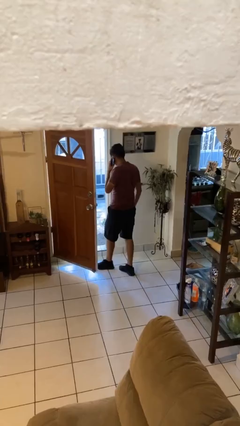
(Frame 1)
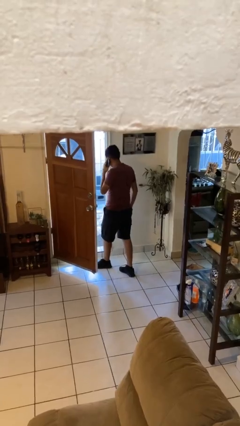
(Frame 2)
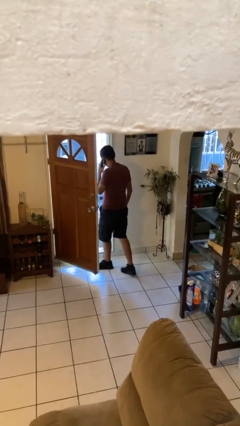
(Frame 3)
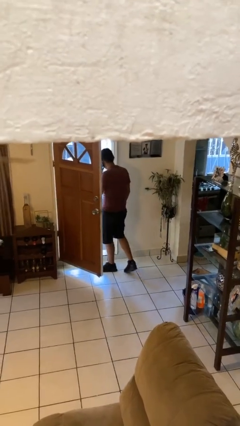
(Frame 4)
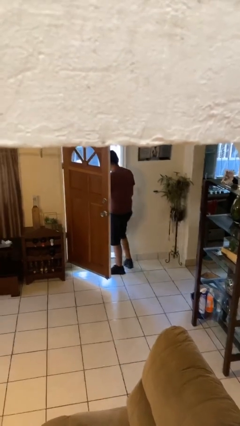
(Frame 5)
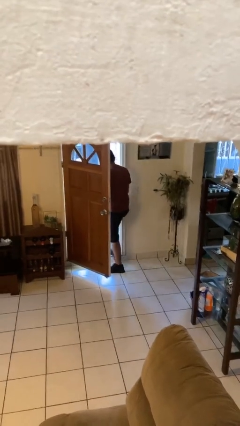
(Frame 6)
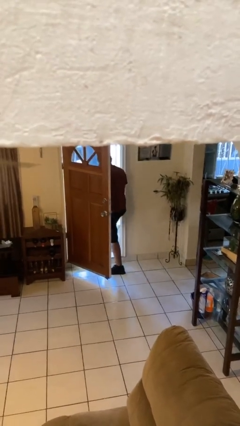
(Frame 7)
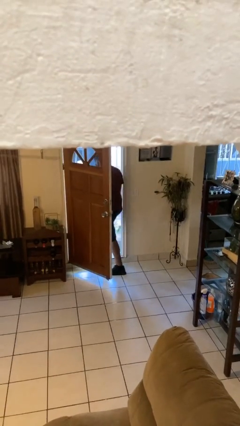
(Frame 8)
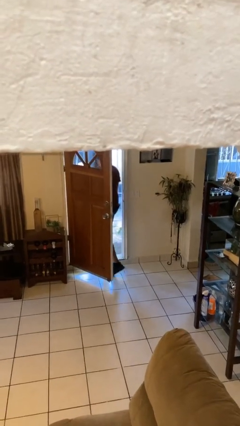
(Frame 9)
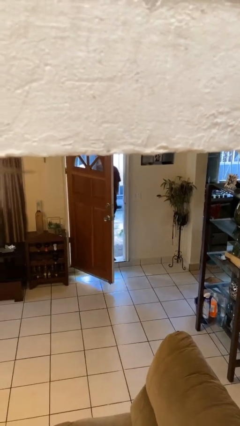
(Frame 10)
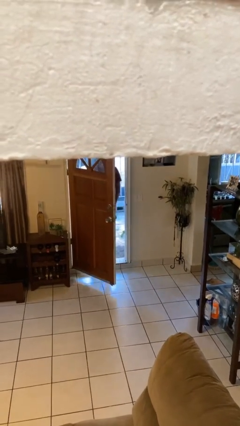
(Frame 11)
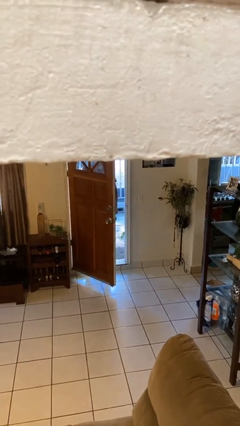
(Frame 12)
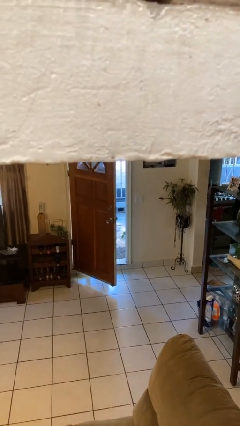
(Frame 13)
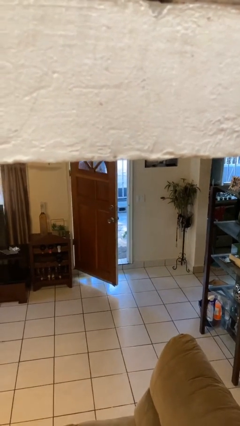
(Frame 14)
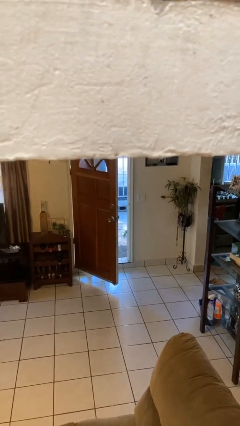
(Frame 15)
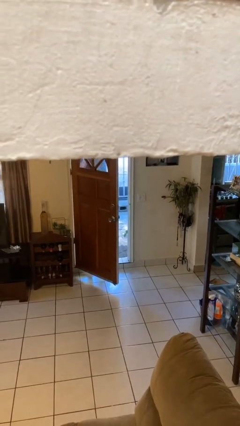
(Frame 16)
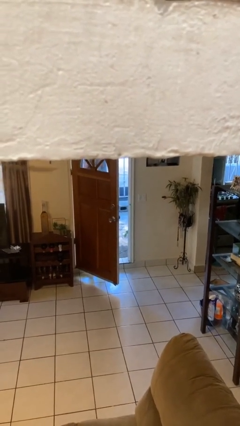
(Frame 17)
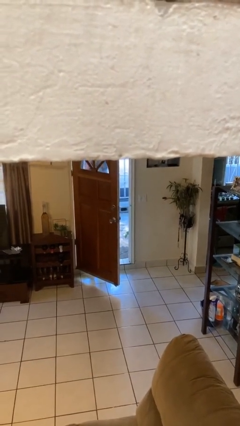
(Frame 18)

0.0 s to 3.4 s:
person exits scene through structure

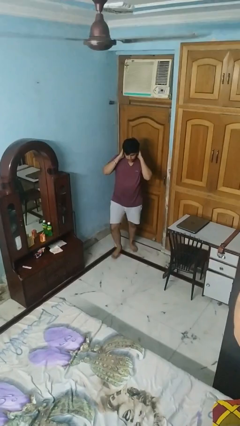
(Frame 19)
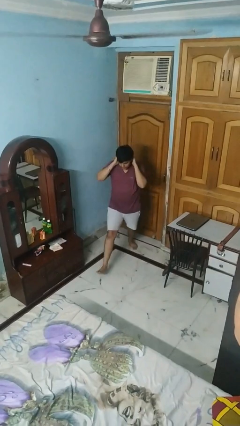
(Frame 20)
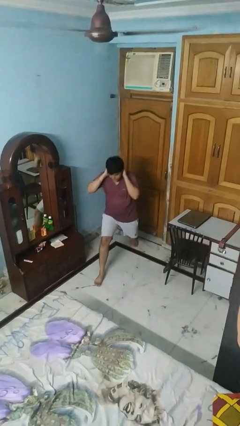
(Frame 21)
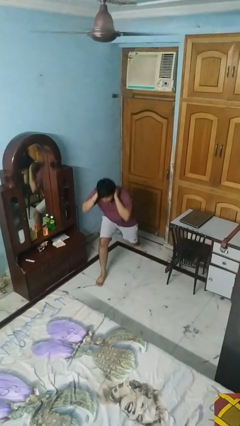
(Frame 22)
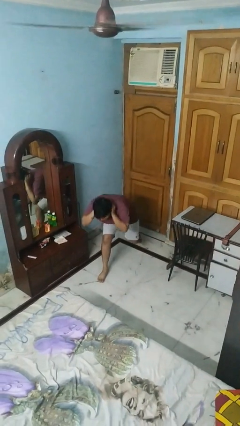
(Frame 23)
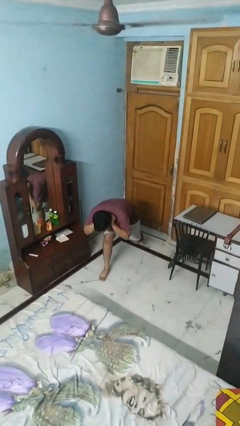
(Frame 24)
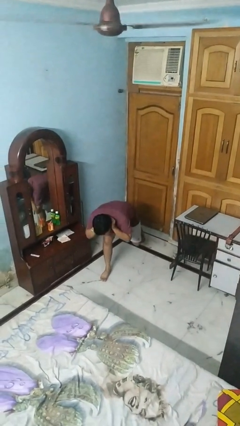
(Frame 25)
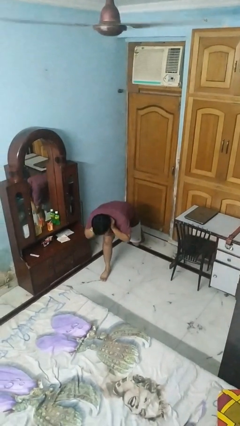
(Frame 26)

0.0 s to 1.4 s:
person exercises with lunges

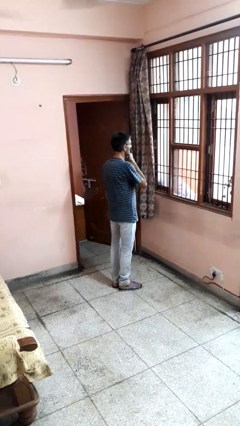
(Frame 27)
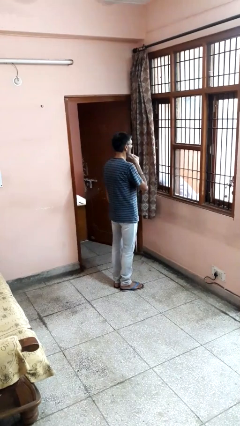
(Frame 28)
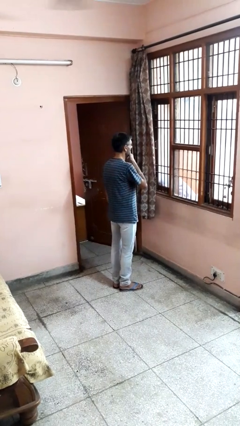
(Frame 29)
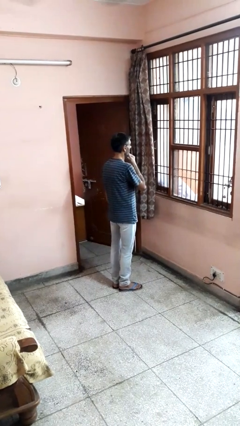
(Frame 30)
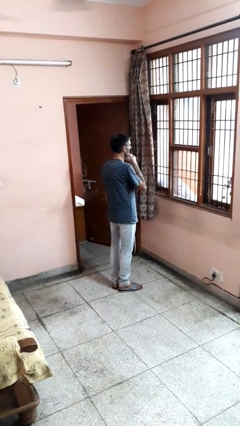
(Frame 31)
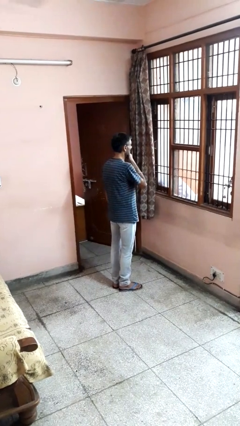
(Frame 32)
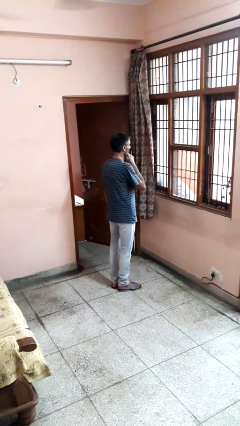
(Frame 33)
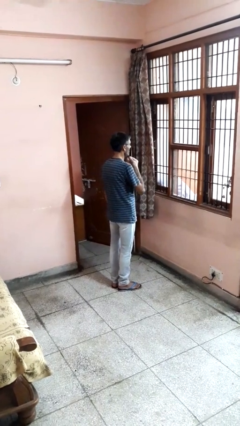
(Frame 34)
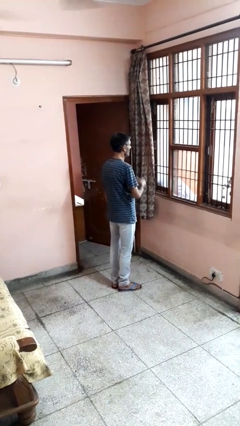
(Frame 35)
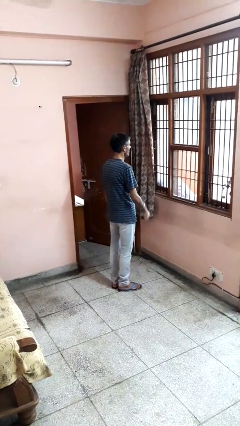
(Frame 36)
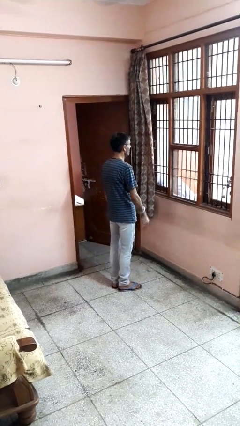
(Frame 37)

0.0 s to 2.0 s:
person strokes chin

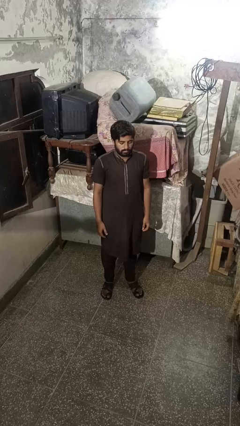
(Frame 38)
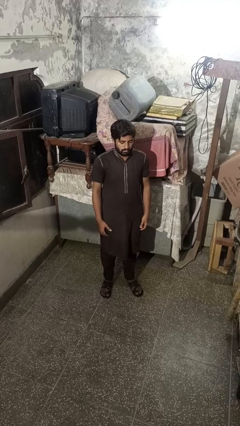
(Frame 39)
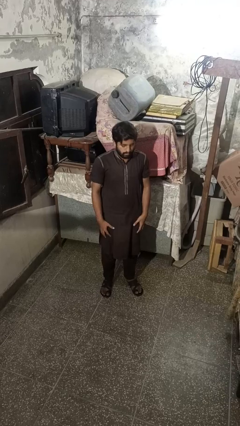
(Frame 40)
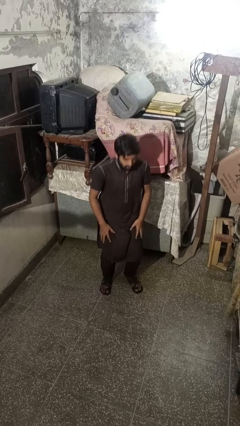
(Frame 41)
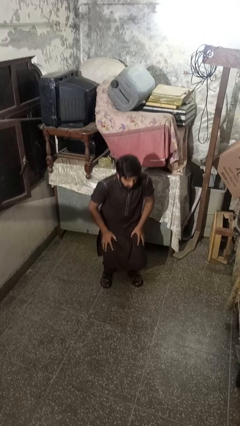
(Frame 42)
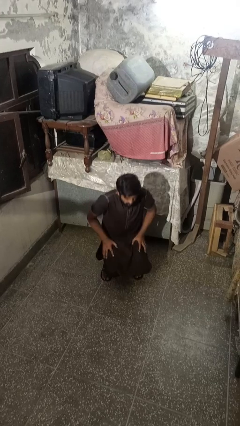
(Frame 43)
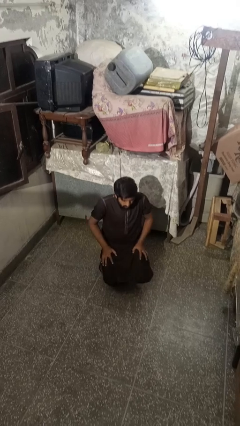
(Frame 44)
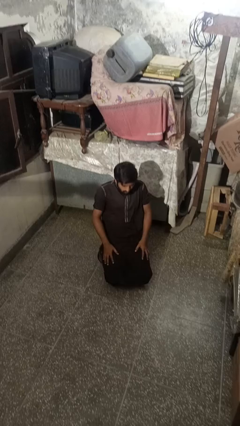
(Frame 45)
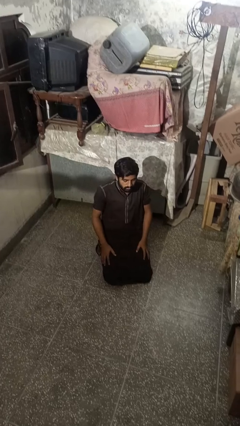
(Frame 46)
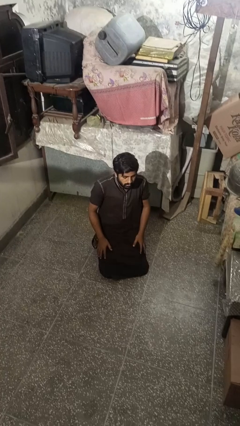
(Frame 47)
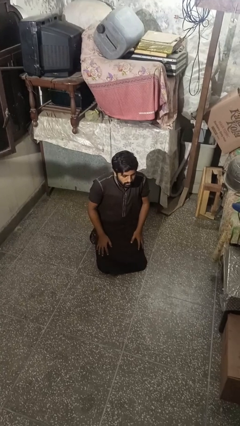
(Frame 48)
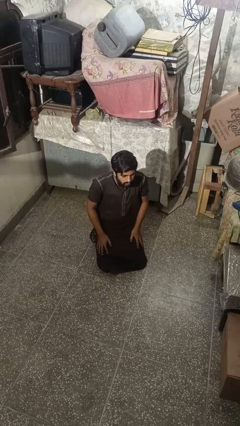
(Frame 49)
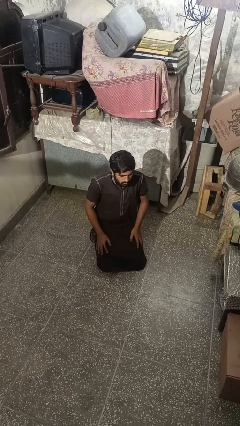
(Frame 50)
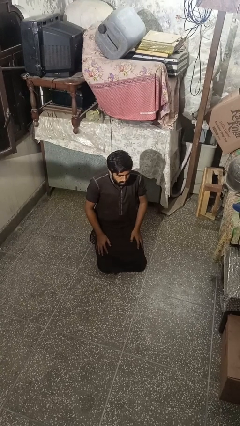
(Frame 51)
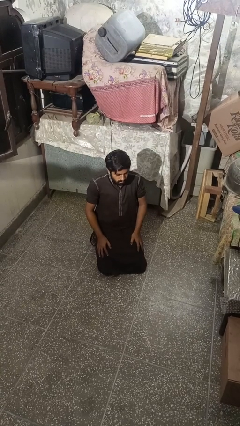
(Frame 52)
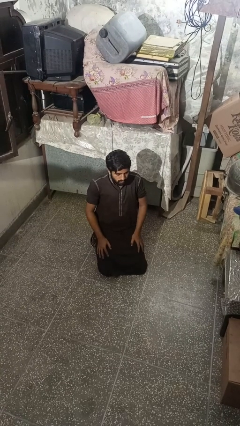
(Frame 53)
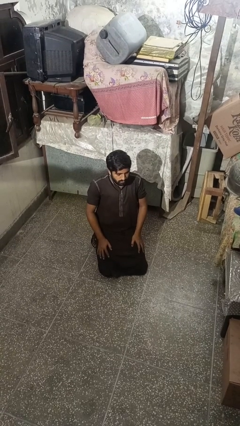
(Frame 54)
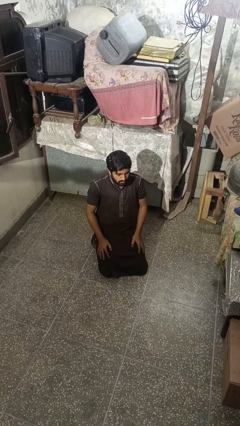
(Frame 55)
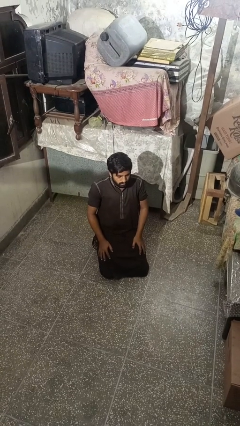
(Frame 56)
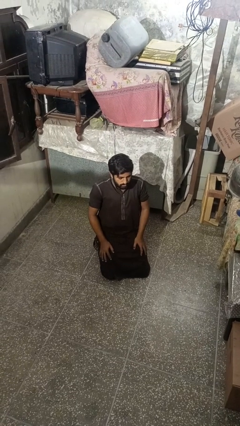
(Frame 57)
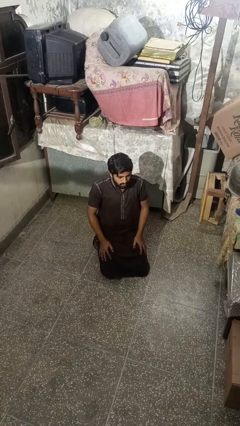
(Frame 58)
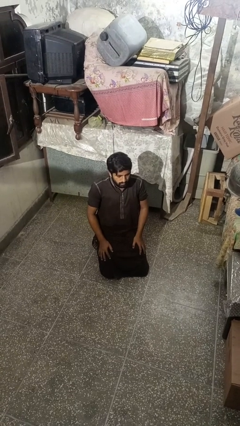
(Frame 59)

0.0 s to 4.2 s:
person kneels

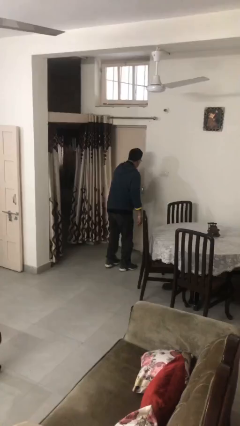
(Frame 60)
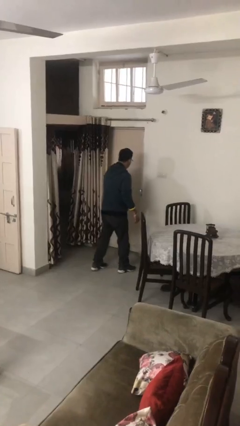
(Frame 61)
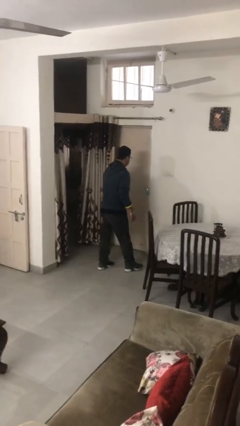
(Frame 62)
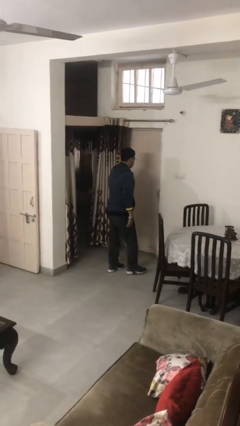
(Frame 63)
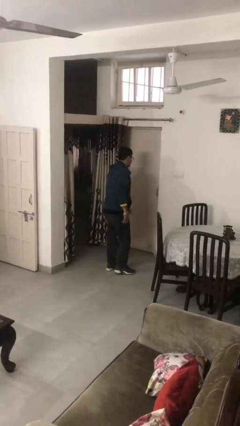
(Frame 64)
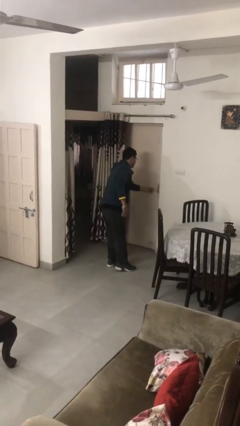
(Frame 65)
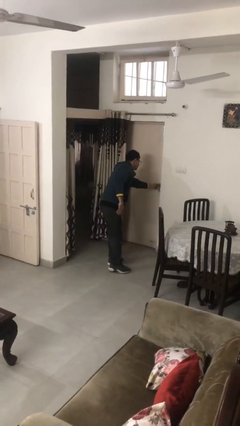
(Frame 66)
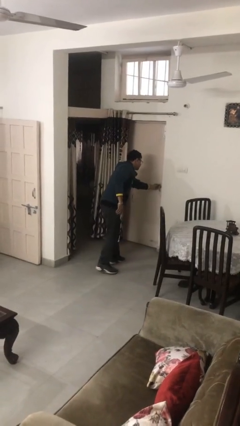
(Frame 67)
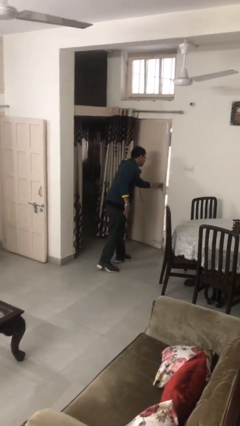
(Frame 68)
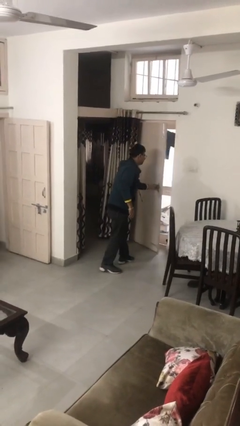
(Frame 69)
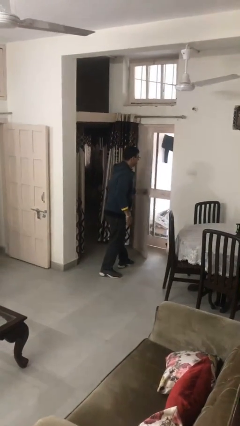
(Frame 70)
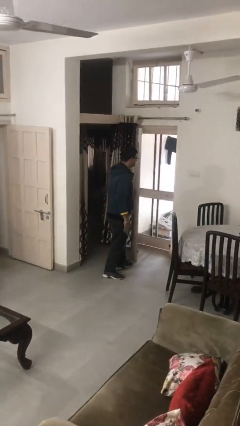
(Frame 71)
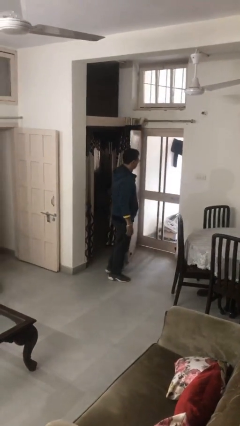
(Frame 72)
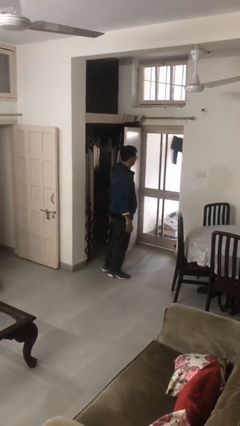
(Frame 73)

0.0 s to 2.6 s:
person opens facility door

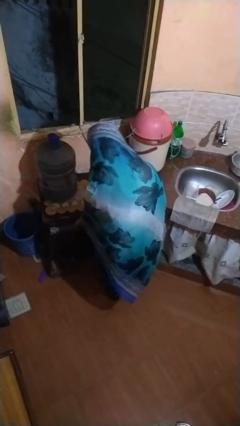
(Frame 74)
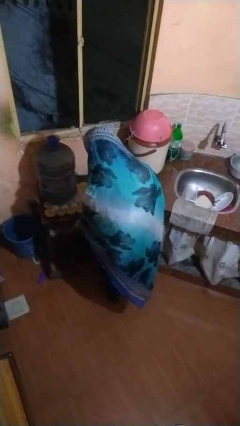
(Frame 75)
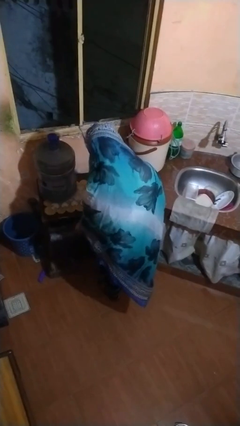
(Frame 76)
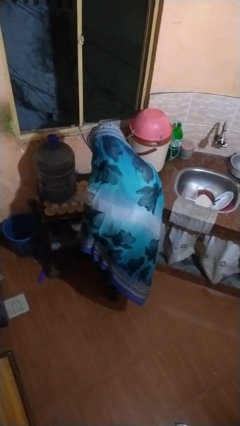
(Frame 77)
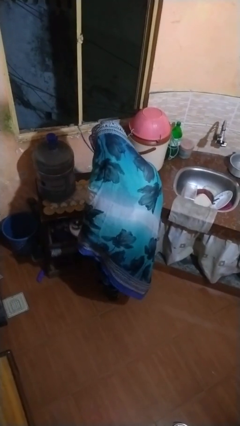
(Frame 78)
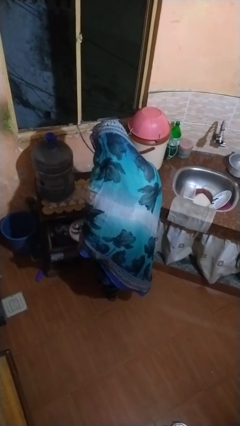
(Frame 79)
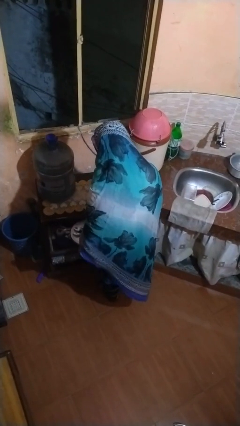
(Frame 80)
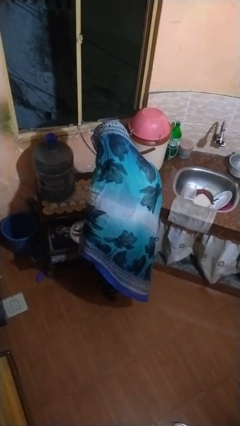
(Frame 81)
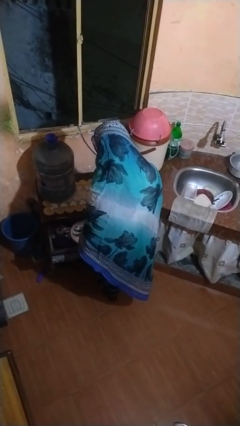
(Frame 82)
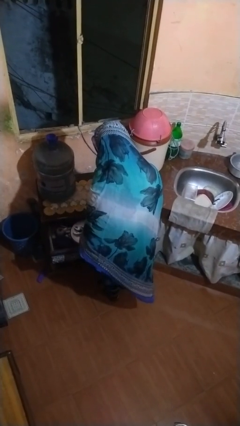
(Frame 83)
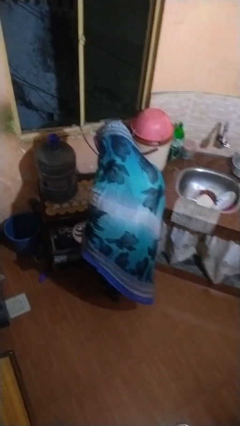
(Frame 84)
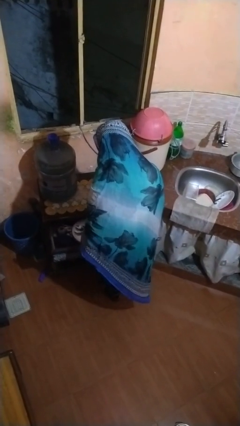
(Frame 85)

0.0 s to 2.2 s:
person opens kitchen drawer

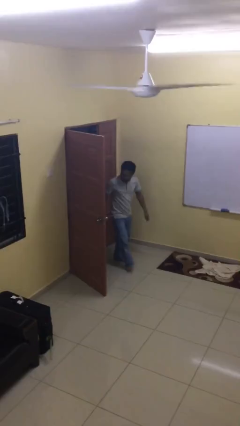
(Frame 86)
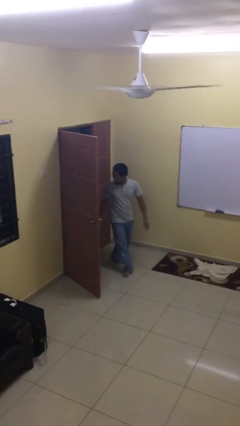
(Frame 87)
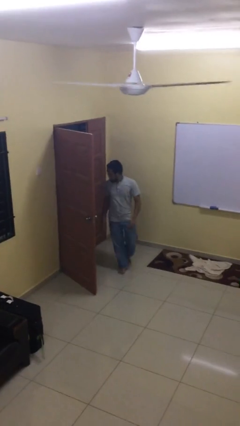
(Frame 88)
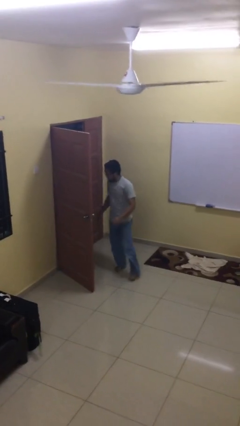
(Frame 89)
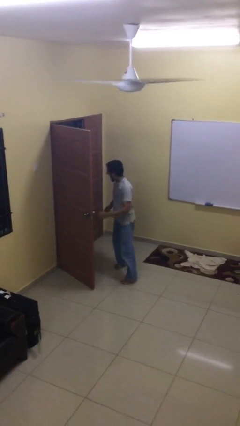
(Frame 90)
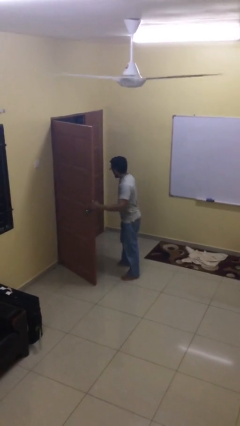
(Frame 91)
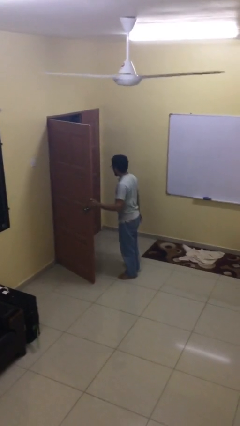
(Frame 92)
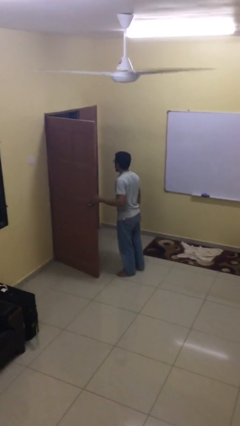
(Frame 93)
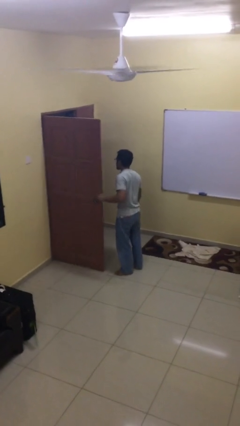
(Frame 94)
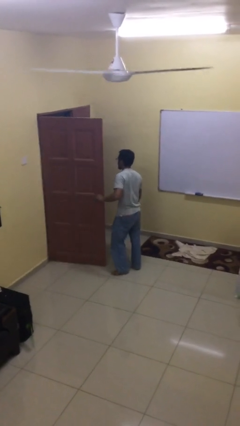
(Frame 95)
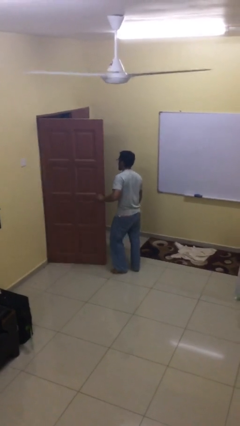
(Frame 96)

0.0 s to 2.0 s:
person enters scene through structure
